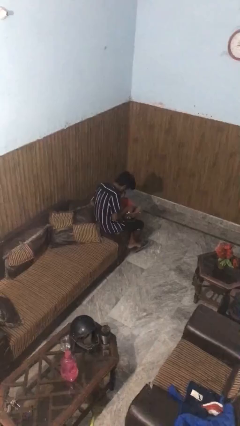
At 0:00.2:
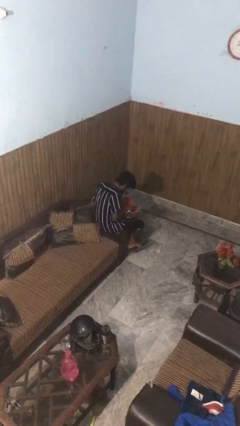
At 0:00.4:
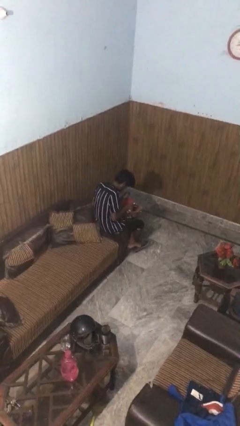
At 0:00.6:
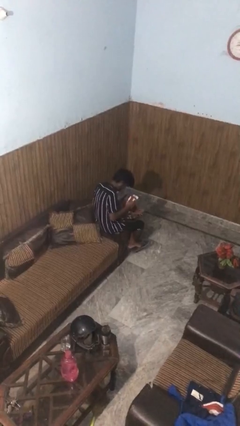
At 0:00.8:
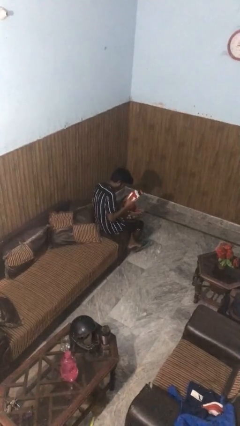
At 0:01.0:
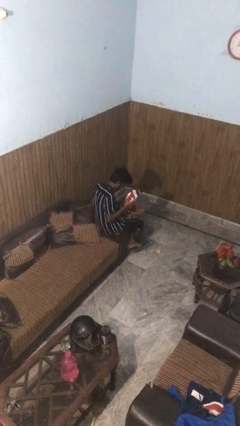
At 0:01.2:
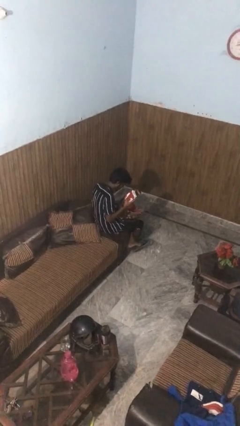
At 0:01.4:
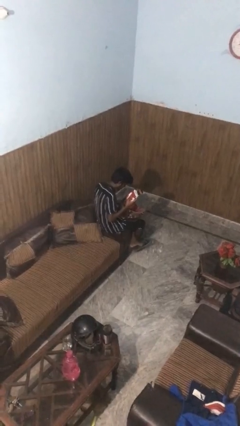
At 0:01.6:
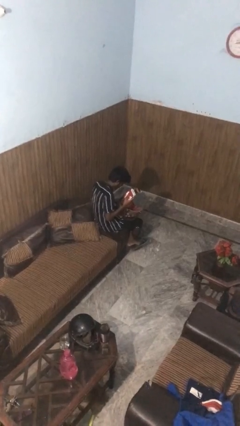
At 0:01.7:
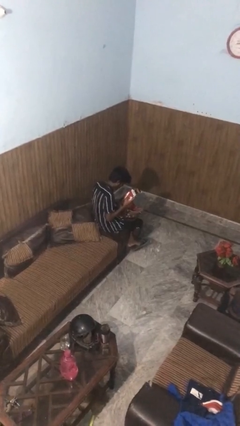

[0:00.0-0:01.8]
person takes object from purse

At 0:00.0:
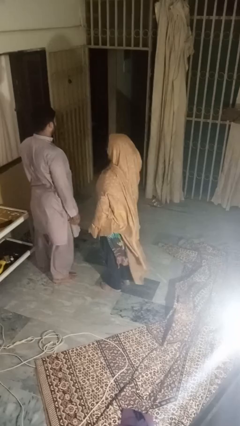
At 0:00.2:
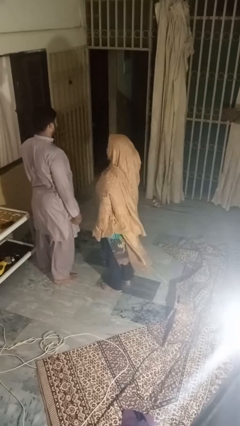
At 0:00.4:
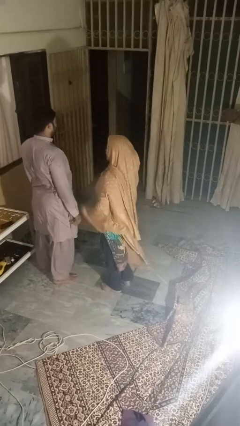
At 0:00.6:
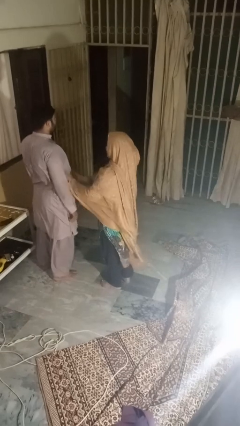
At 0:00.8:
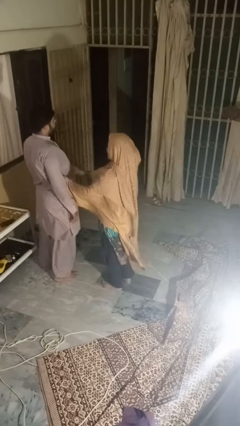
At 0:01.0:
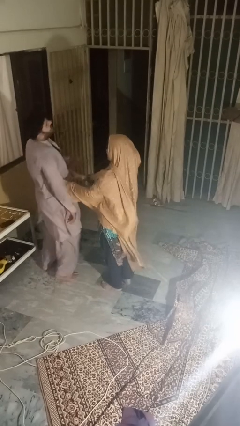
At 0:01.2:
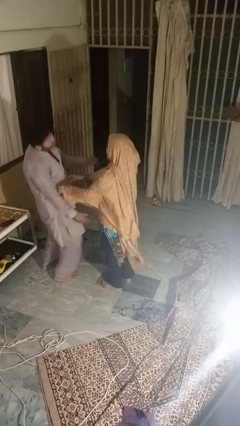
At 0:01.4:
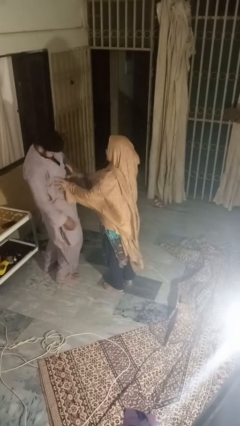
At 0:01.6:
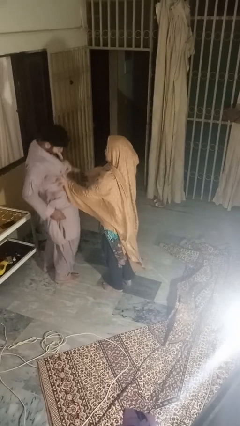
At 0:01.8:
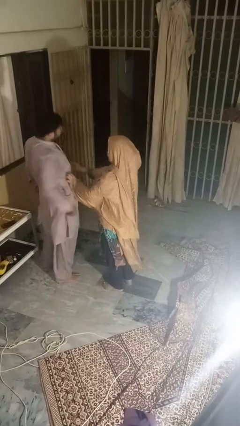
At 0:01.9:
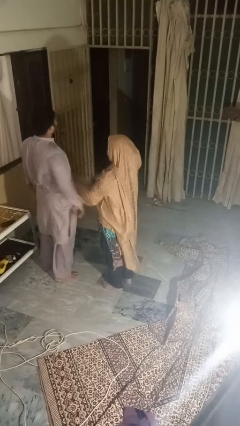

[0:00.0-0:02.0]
person tickles person

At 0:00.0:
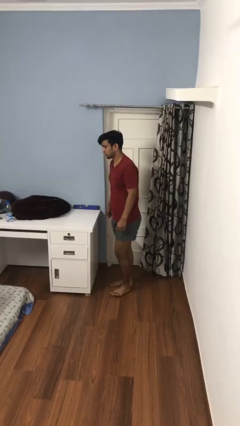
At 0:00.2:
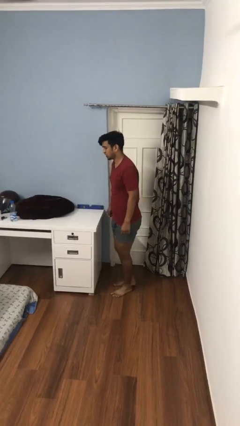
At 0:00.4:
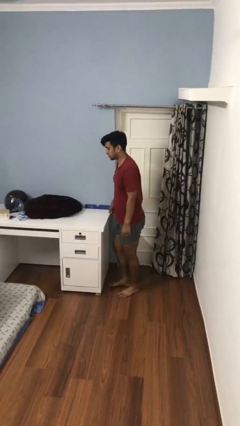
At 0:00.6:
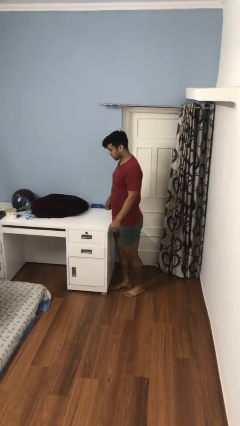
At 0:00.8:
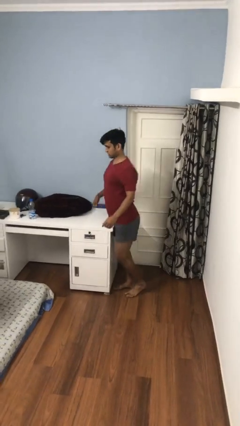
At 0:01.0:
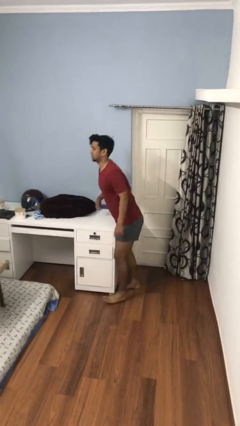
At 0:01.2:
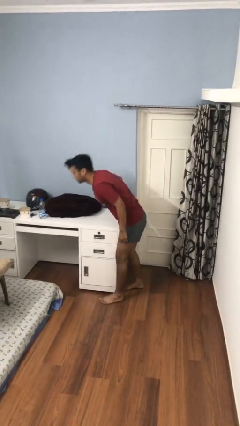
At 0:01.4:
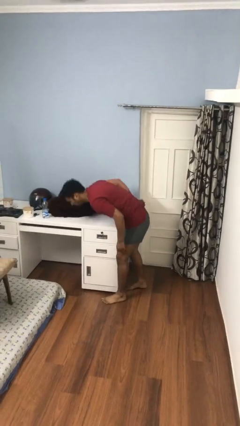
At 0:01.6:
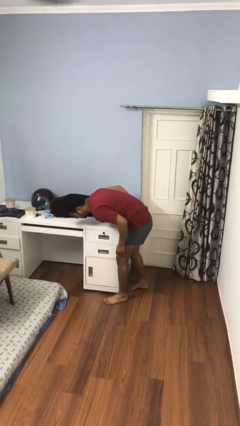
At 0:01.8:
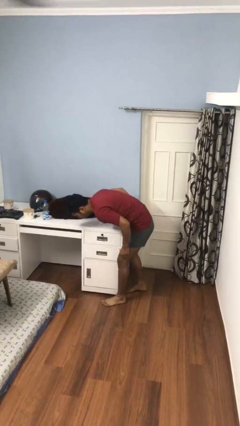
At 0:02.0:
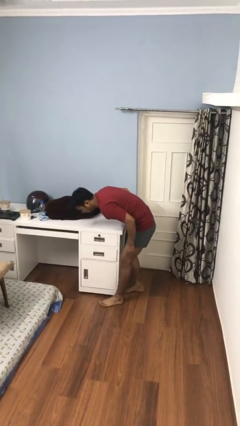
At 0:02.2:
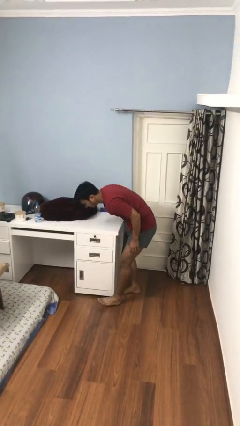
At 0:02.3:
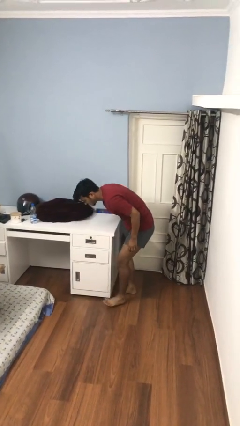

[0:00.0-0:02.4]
person bumps into table

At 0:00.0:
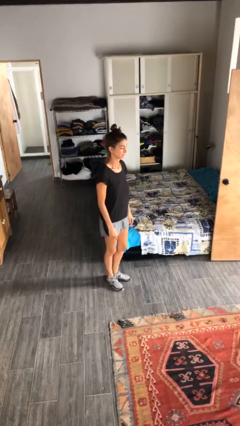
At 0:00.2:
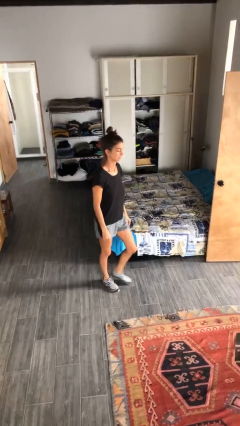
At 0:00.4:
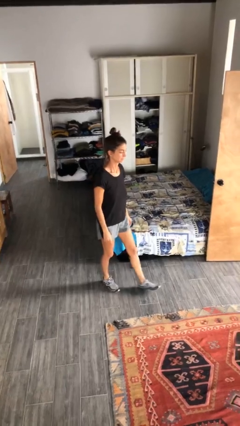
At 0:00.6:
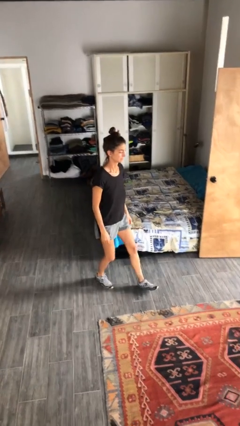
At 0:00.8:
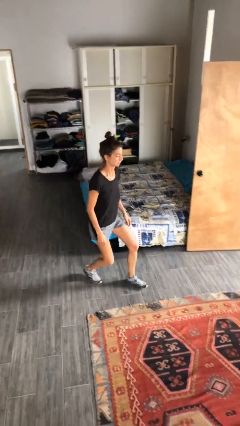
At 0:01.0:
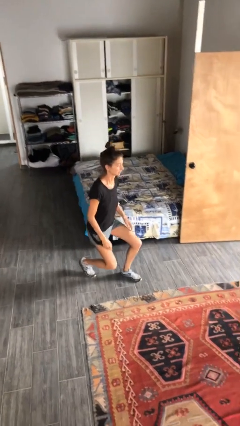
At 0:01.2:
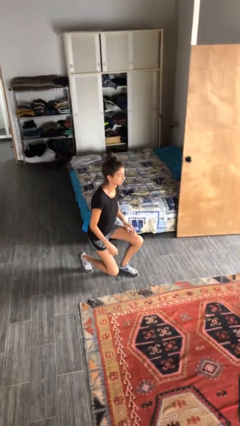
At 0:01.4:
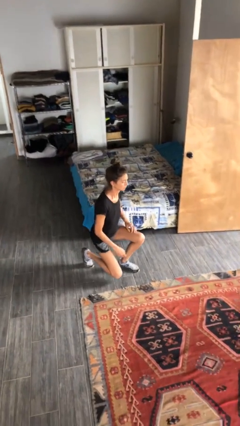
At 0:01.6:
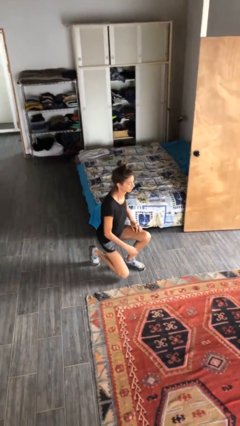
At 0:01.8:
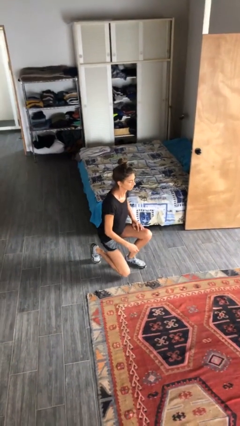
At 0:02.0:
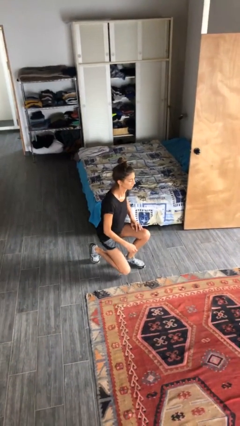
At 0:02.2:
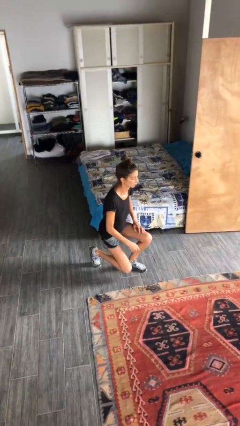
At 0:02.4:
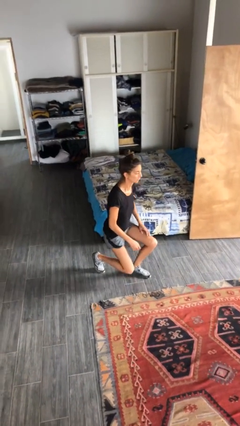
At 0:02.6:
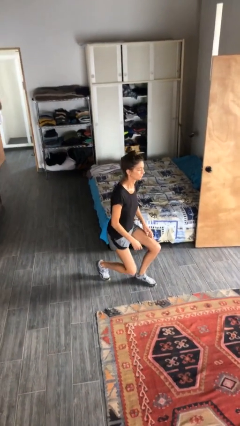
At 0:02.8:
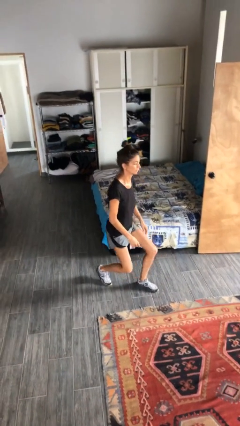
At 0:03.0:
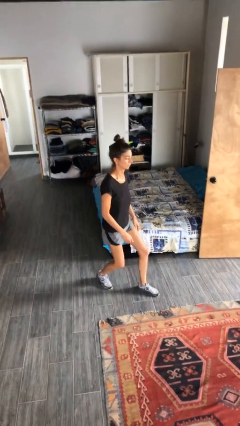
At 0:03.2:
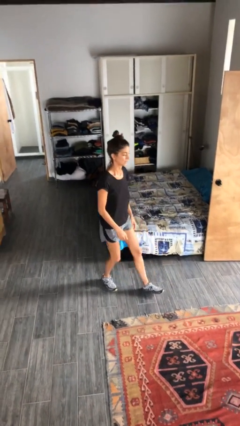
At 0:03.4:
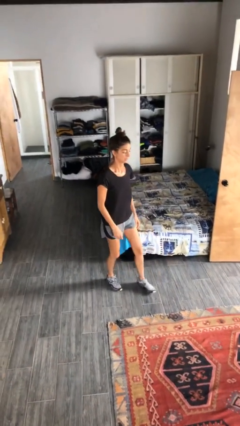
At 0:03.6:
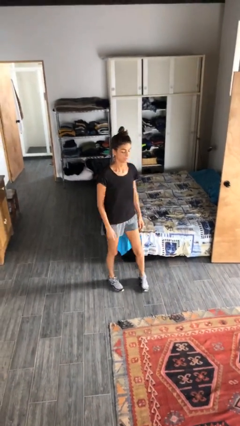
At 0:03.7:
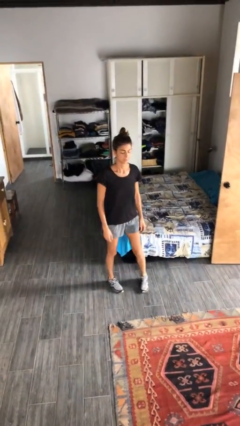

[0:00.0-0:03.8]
person exercises with lunges

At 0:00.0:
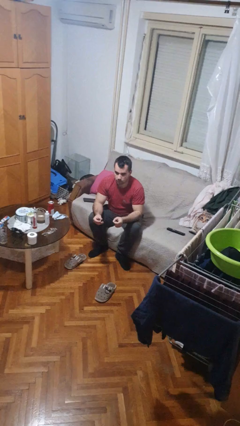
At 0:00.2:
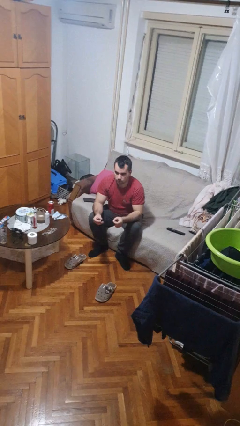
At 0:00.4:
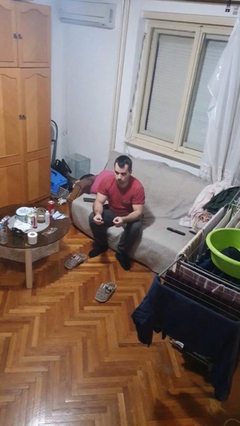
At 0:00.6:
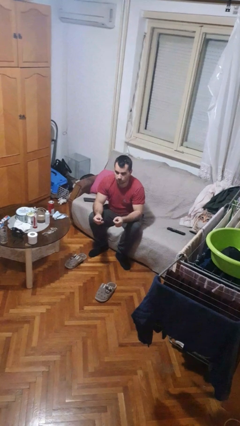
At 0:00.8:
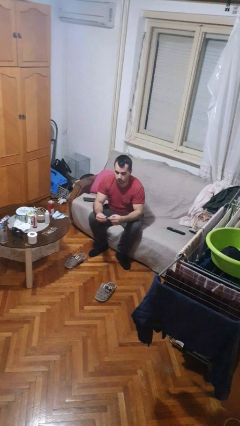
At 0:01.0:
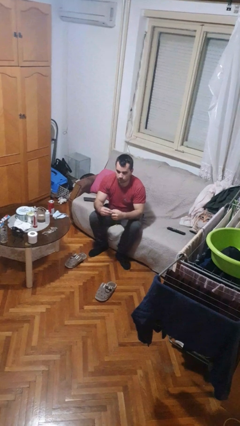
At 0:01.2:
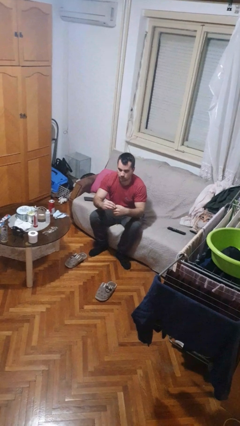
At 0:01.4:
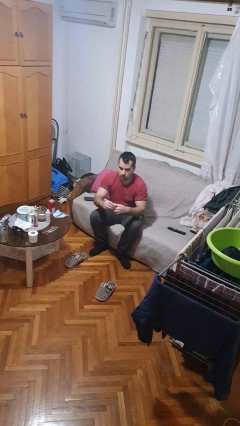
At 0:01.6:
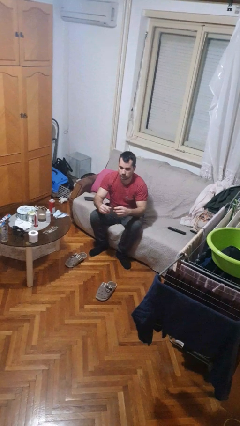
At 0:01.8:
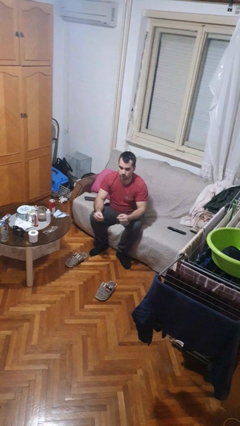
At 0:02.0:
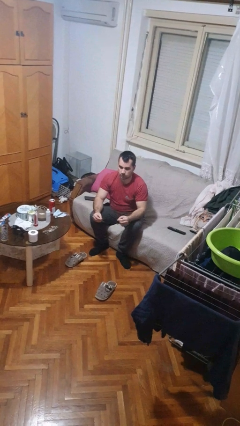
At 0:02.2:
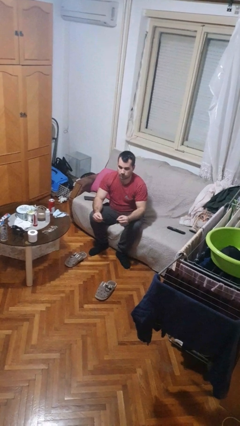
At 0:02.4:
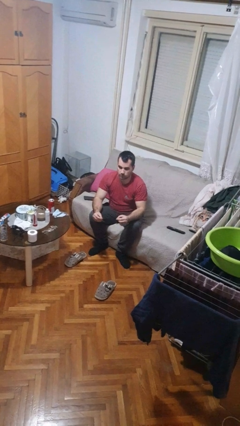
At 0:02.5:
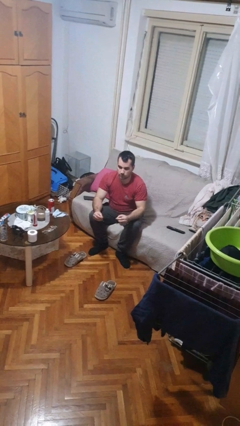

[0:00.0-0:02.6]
person puts on ring

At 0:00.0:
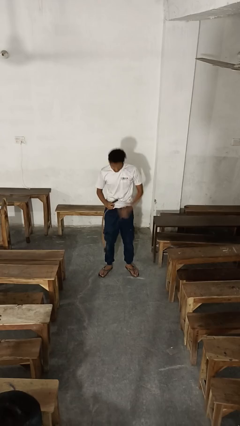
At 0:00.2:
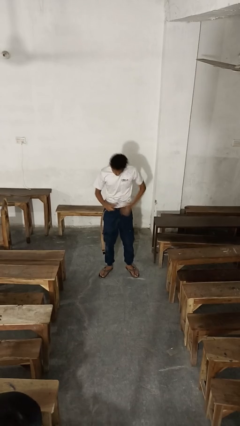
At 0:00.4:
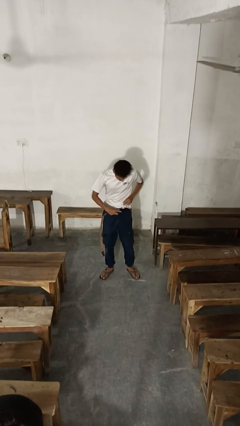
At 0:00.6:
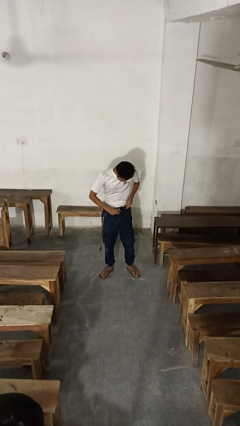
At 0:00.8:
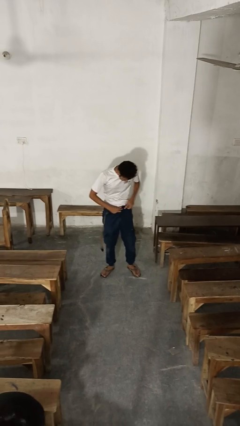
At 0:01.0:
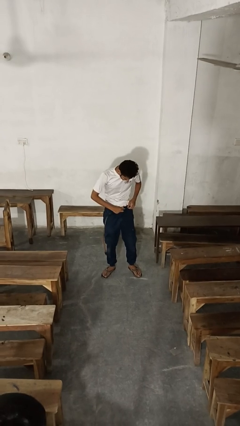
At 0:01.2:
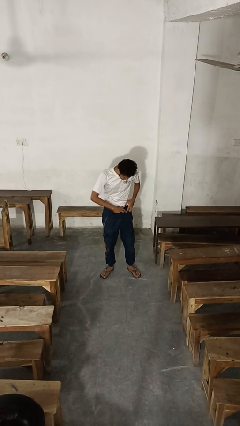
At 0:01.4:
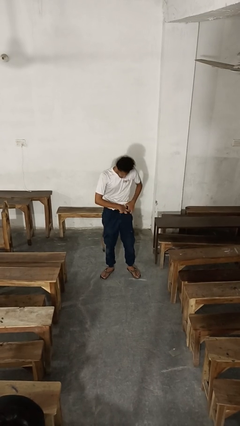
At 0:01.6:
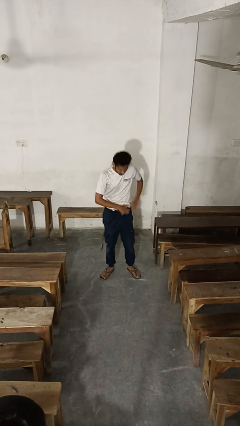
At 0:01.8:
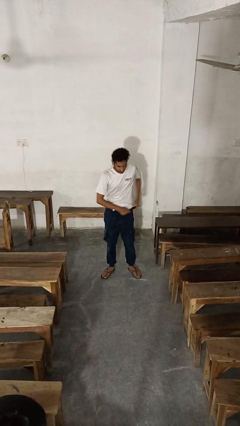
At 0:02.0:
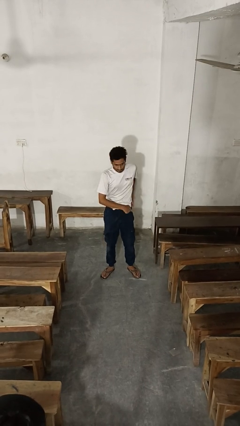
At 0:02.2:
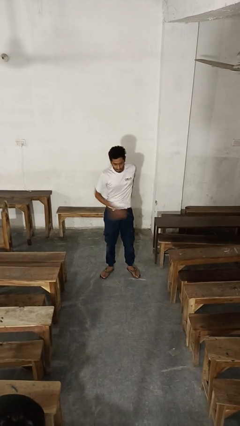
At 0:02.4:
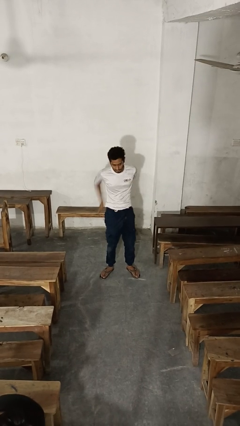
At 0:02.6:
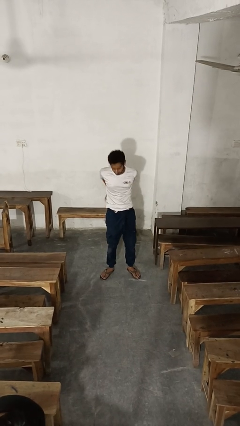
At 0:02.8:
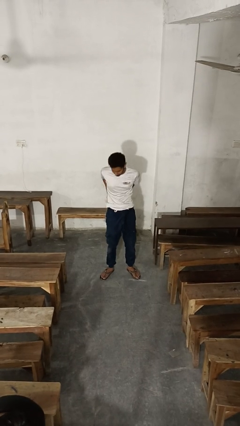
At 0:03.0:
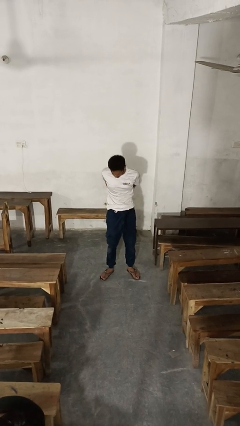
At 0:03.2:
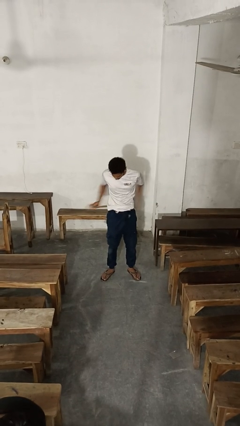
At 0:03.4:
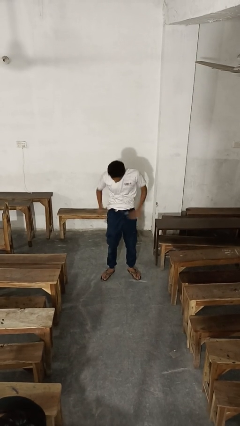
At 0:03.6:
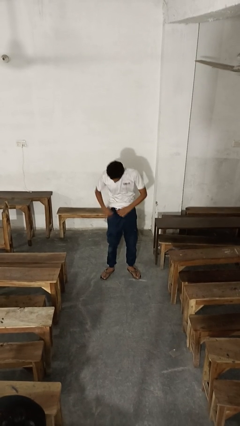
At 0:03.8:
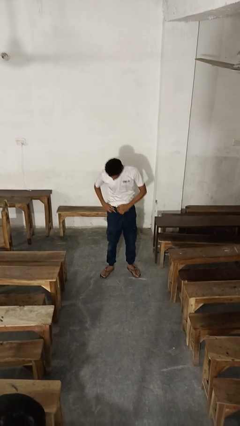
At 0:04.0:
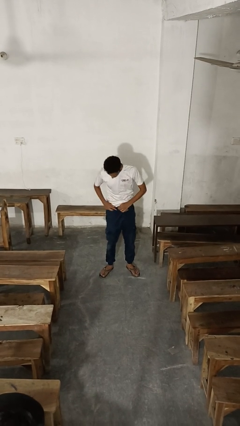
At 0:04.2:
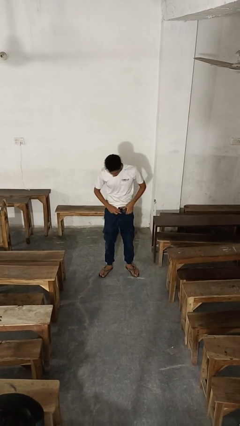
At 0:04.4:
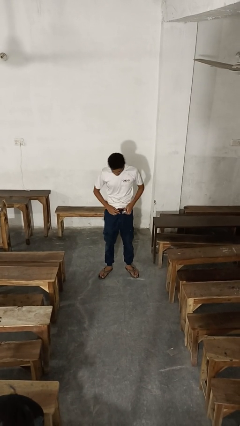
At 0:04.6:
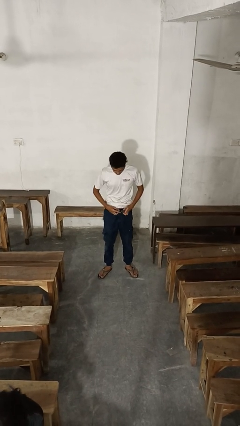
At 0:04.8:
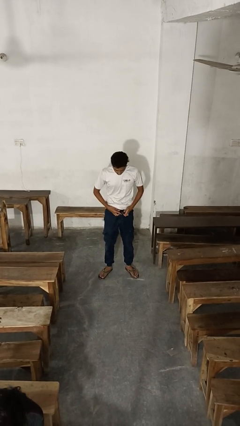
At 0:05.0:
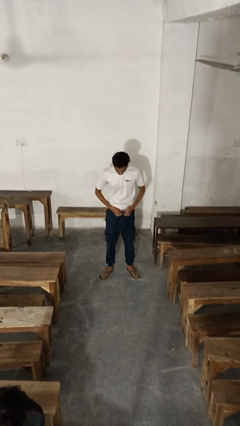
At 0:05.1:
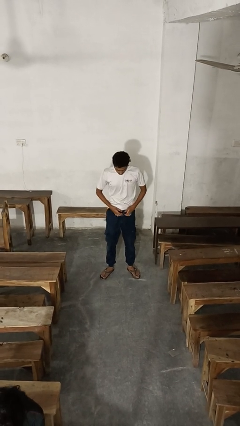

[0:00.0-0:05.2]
person puts on belt
